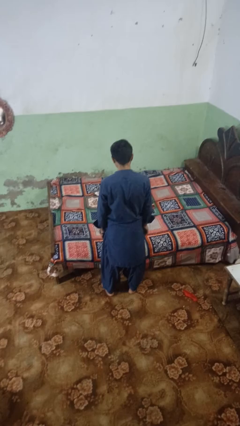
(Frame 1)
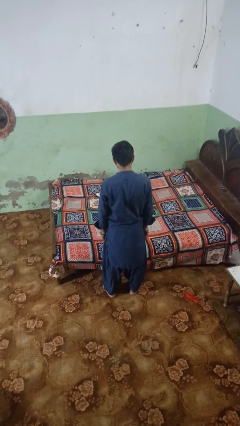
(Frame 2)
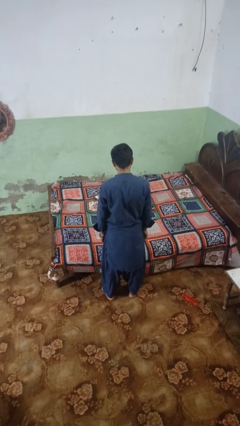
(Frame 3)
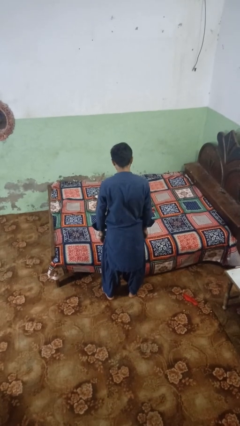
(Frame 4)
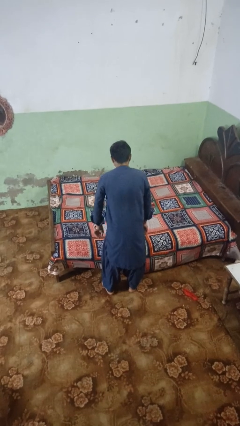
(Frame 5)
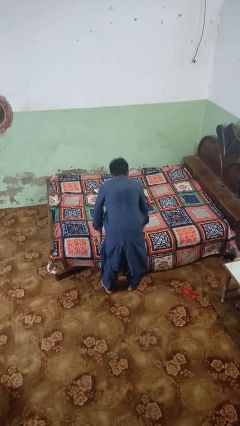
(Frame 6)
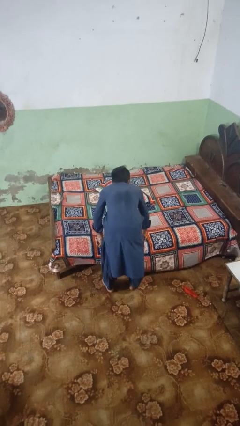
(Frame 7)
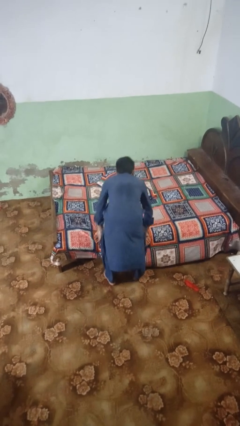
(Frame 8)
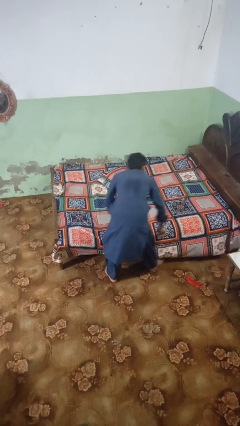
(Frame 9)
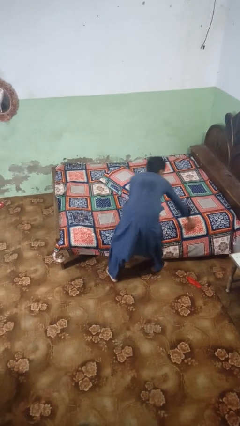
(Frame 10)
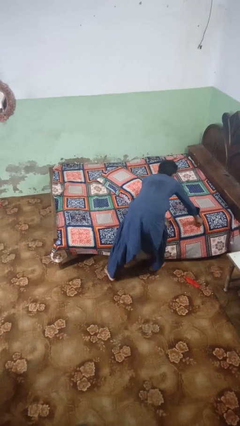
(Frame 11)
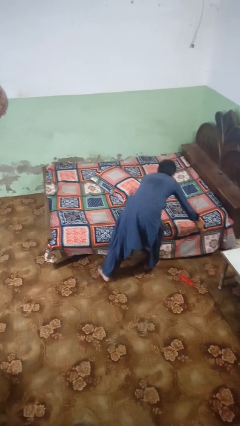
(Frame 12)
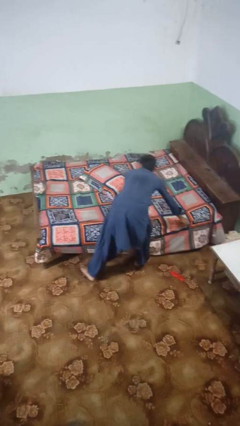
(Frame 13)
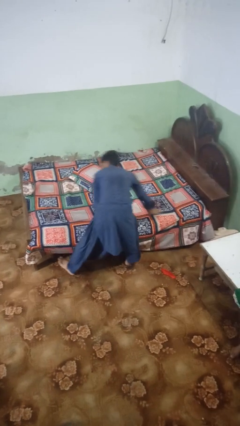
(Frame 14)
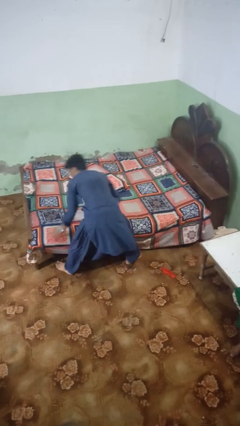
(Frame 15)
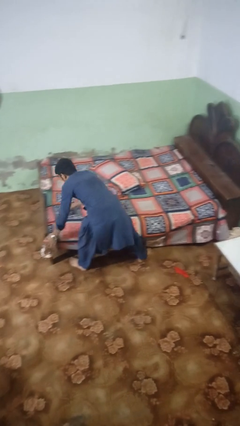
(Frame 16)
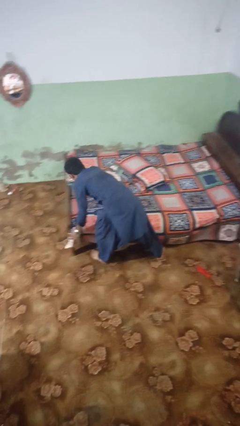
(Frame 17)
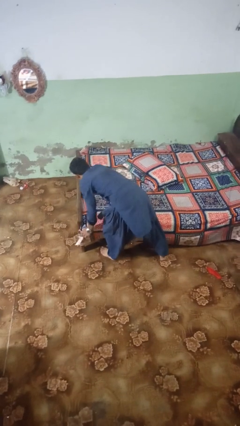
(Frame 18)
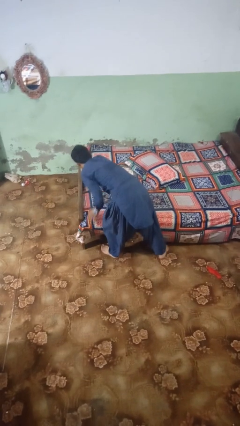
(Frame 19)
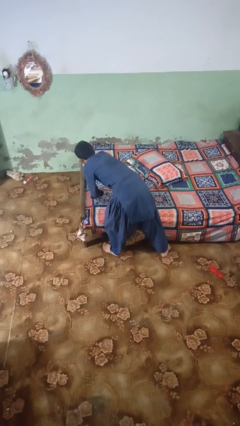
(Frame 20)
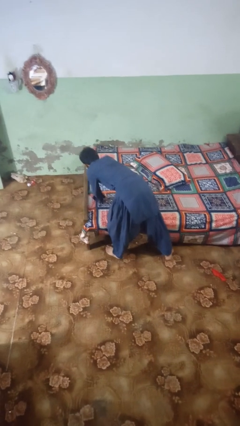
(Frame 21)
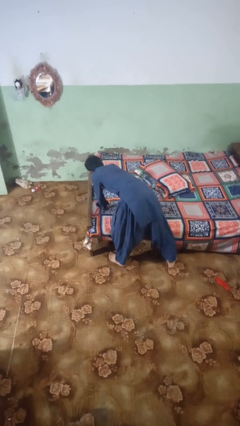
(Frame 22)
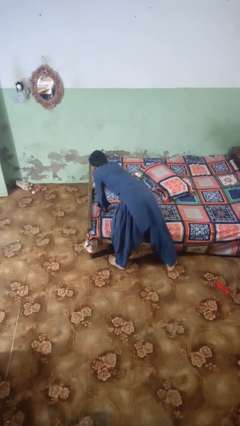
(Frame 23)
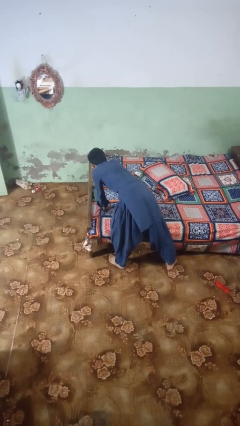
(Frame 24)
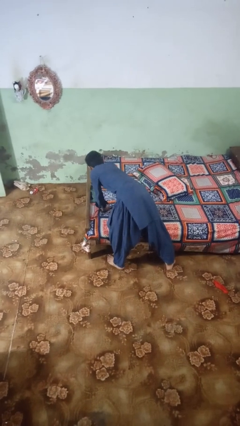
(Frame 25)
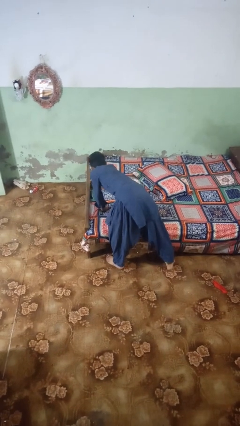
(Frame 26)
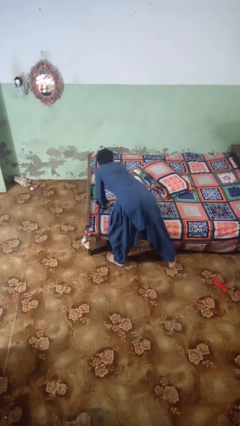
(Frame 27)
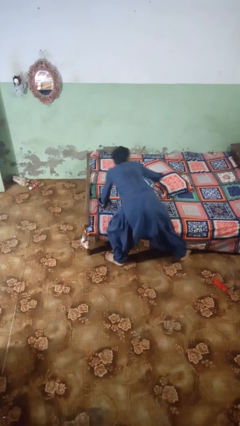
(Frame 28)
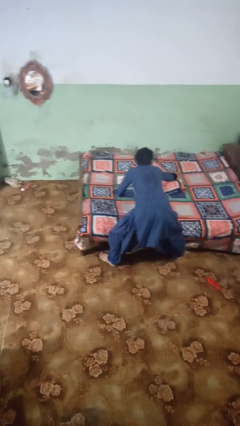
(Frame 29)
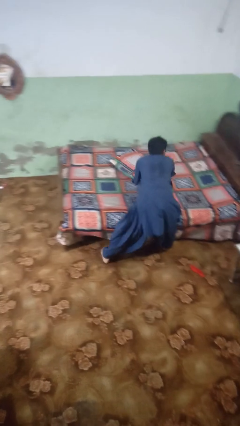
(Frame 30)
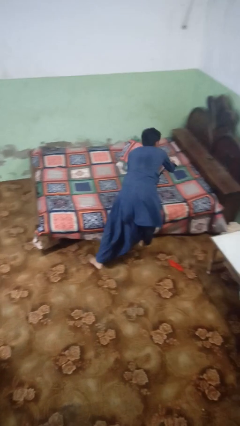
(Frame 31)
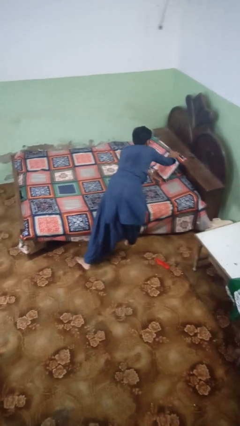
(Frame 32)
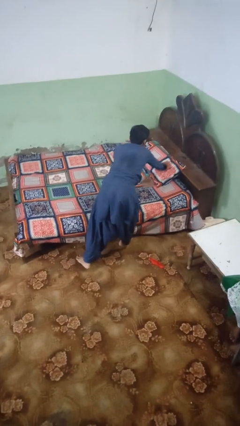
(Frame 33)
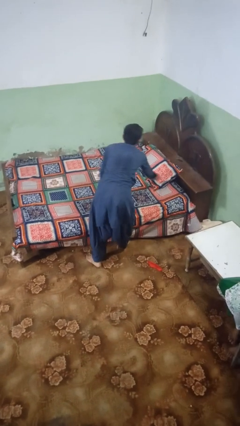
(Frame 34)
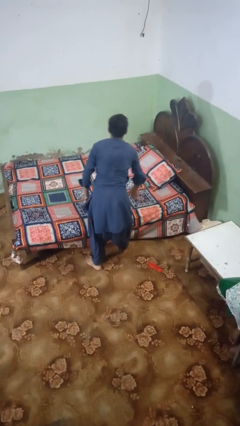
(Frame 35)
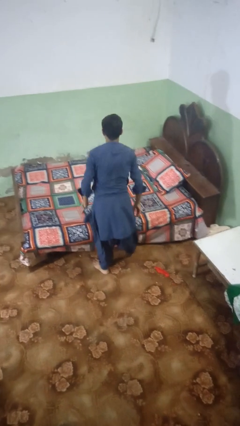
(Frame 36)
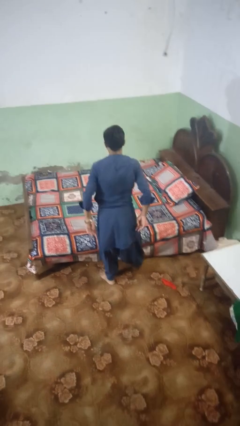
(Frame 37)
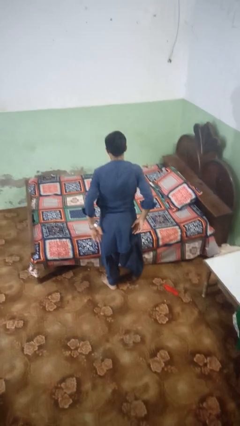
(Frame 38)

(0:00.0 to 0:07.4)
person makes bed

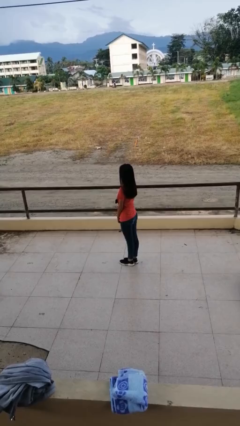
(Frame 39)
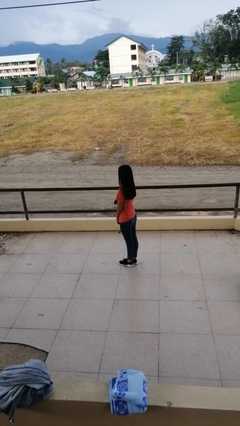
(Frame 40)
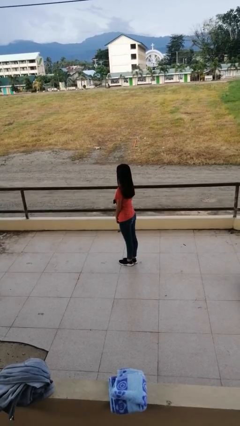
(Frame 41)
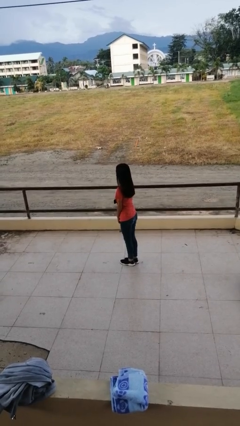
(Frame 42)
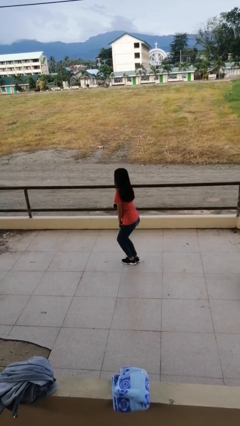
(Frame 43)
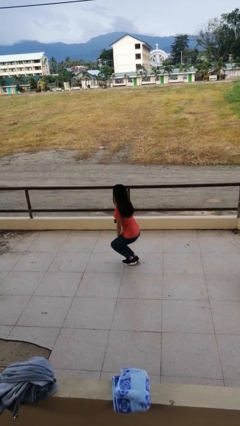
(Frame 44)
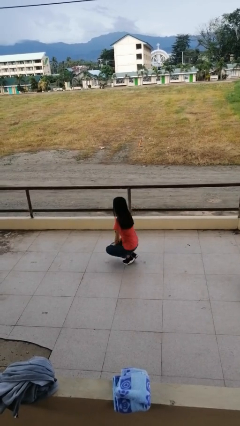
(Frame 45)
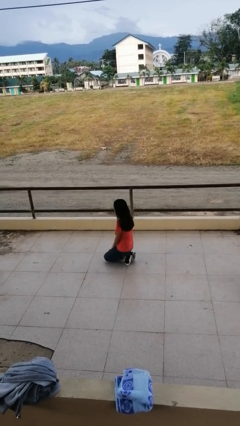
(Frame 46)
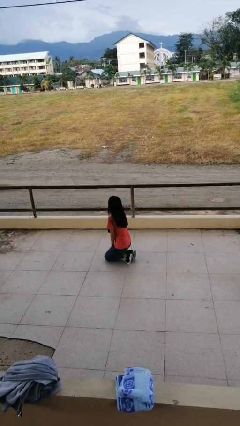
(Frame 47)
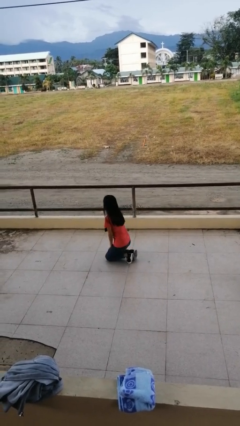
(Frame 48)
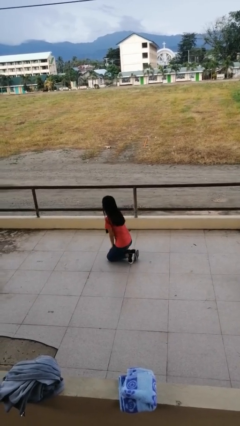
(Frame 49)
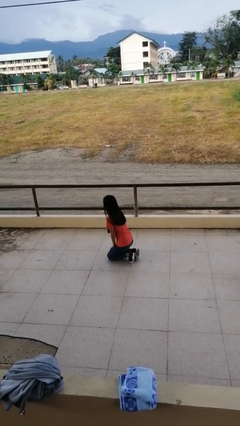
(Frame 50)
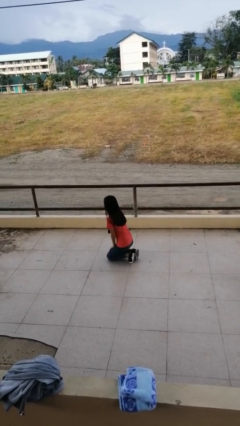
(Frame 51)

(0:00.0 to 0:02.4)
person kneels

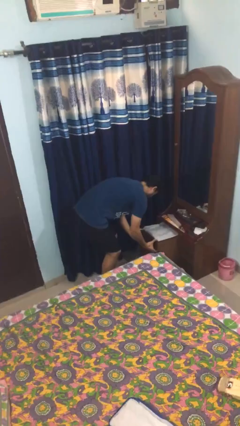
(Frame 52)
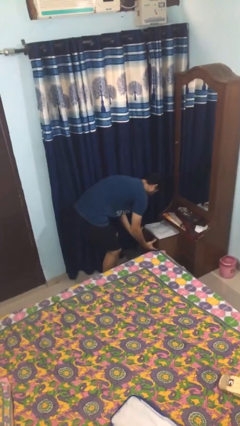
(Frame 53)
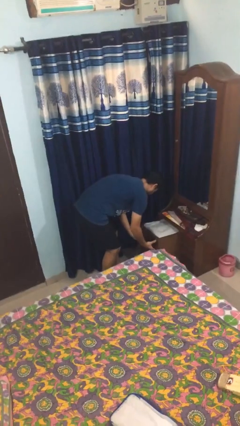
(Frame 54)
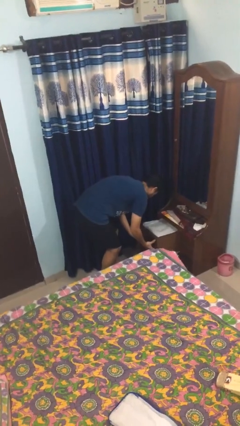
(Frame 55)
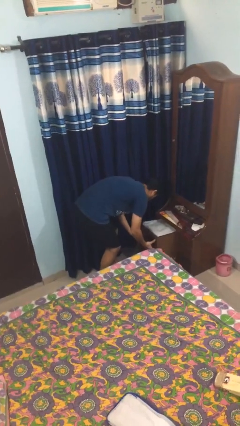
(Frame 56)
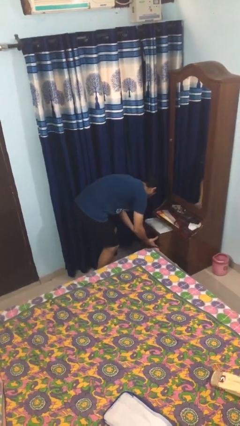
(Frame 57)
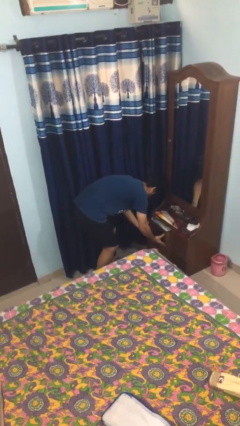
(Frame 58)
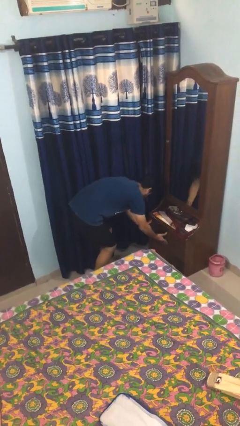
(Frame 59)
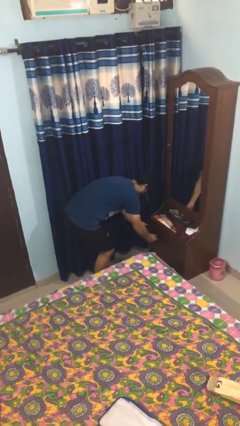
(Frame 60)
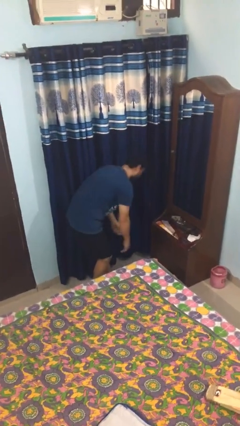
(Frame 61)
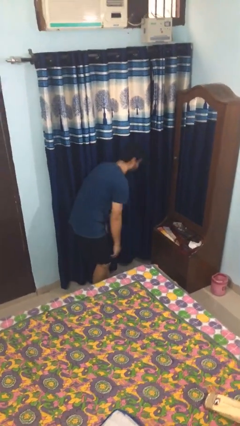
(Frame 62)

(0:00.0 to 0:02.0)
person closes dresser drawer

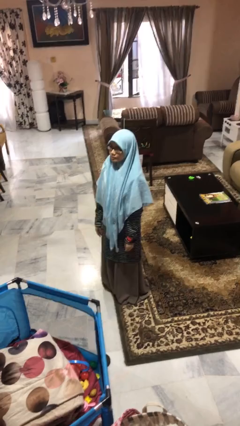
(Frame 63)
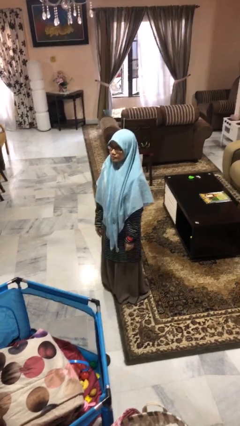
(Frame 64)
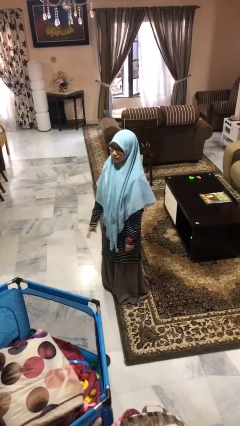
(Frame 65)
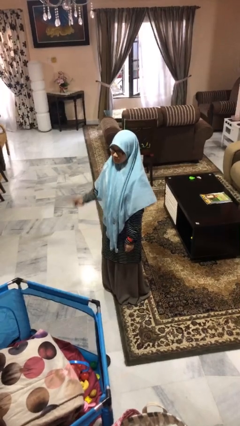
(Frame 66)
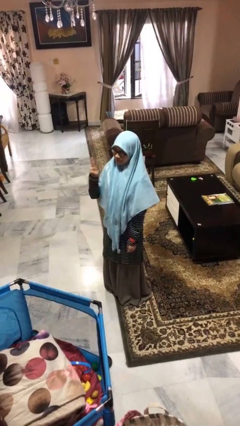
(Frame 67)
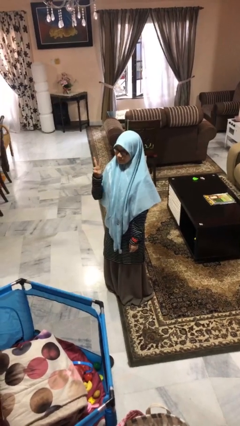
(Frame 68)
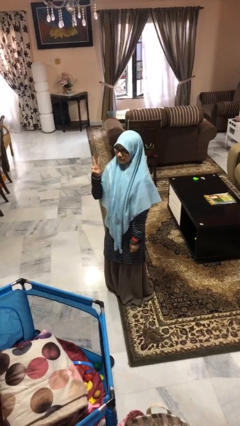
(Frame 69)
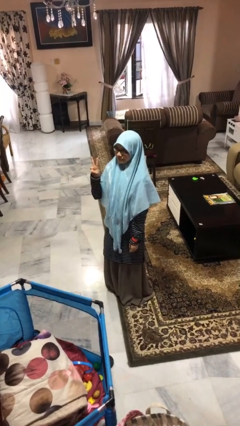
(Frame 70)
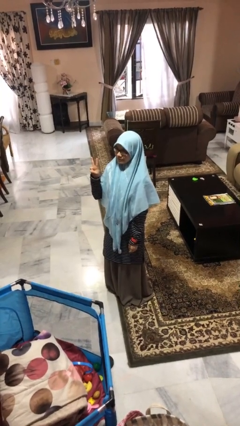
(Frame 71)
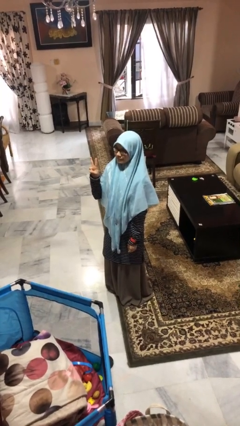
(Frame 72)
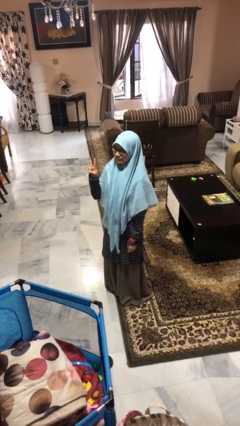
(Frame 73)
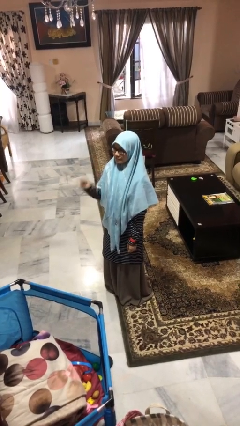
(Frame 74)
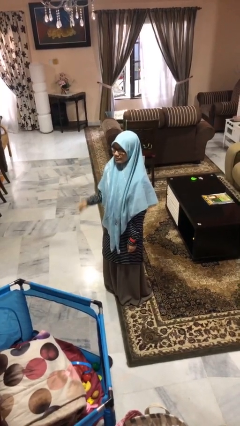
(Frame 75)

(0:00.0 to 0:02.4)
person gestures peace

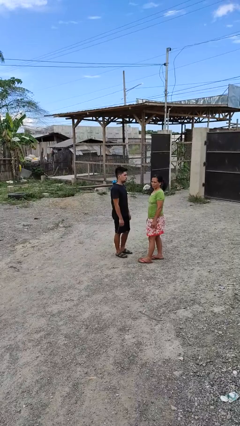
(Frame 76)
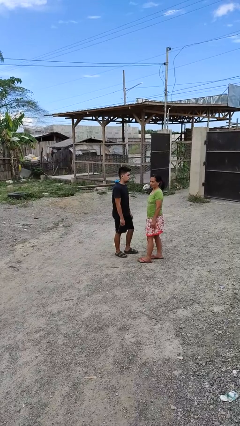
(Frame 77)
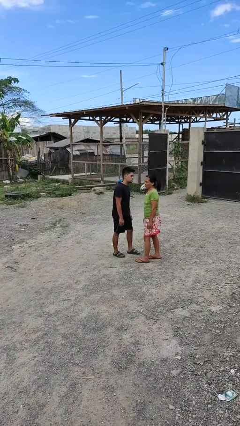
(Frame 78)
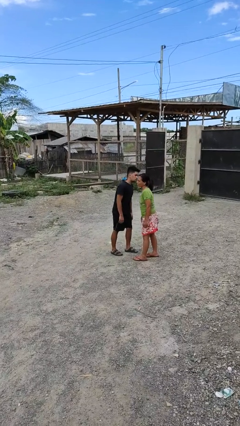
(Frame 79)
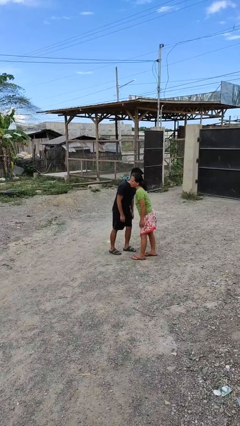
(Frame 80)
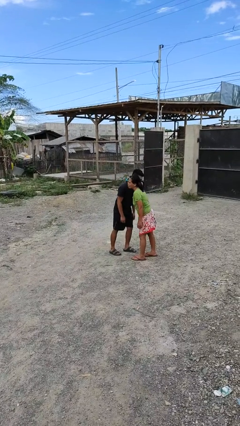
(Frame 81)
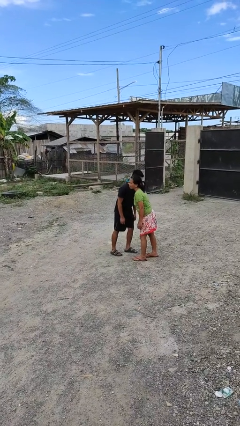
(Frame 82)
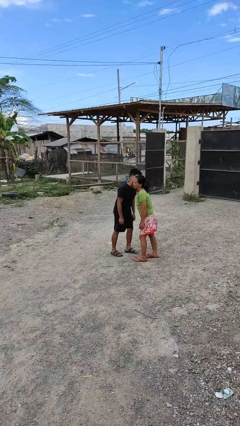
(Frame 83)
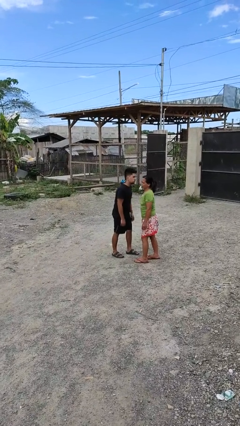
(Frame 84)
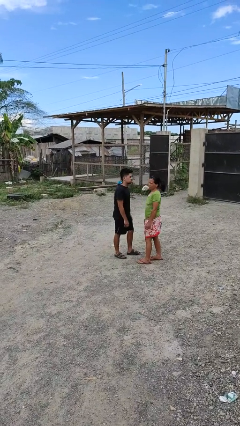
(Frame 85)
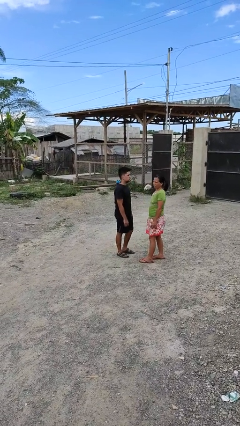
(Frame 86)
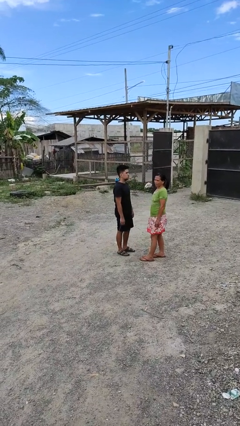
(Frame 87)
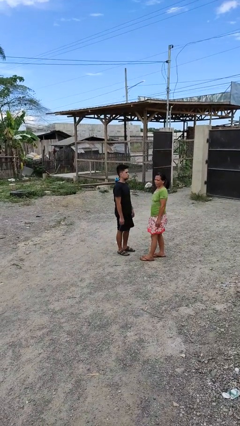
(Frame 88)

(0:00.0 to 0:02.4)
person kisses cheek of person

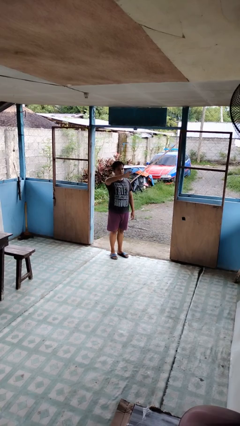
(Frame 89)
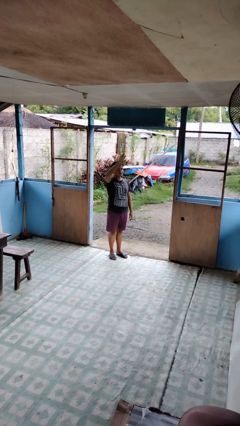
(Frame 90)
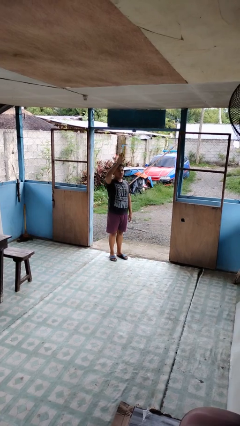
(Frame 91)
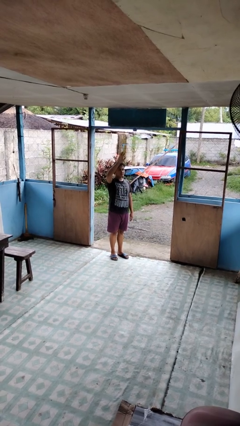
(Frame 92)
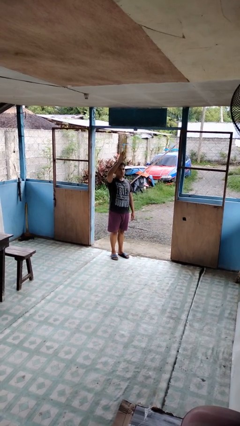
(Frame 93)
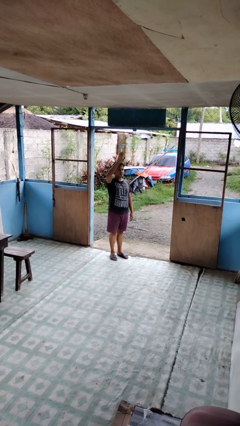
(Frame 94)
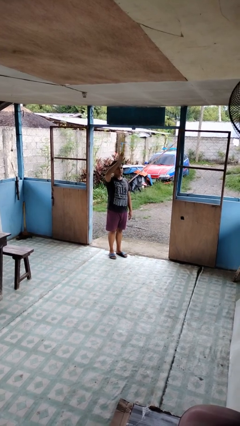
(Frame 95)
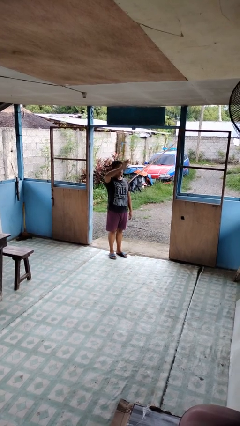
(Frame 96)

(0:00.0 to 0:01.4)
person gestures swipe up
